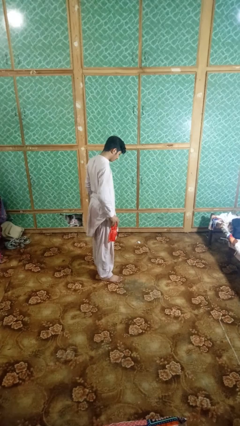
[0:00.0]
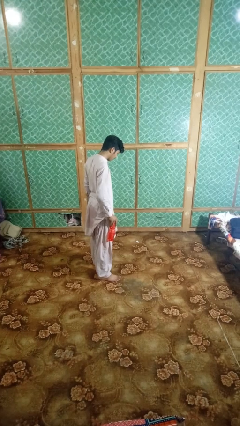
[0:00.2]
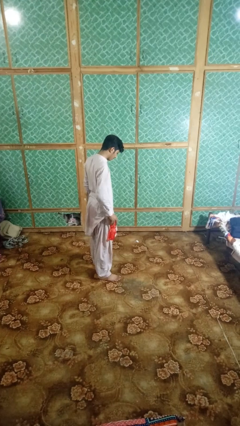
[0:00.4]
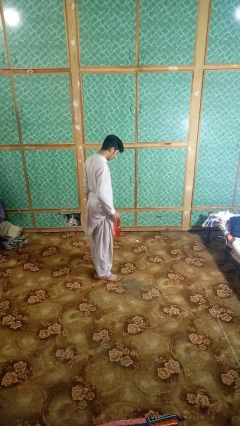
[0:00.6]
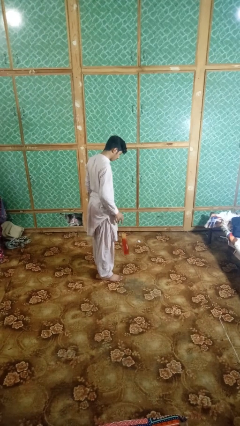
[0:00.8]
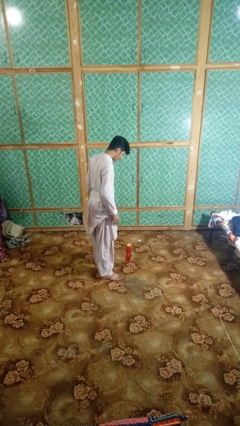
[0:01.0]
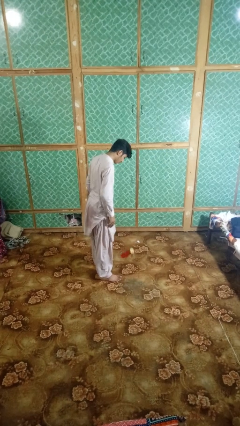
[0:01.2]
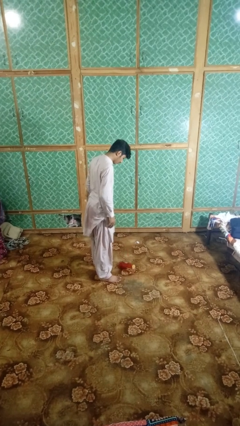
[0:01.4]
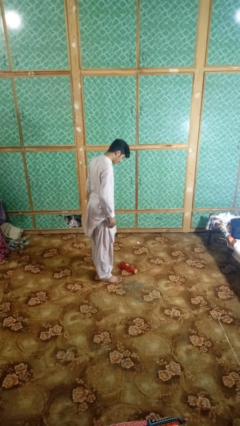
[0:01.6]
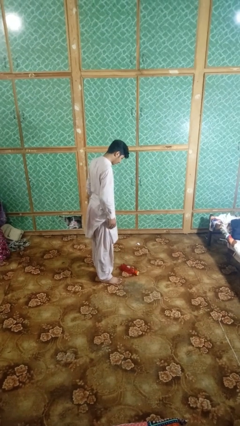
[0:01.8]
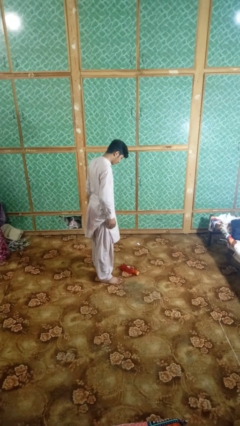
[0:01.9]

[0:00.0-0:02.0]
person drops object

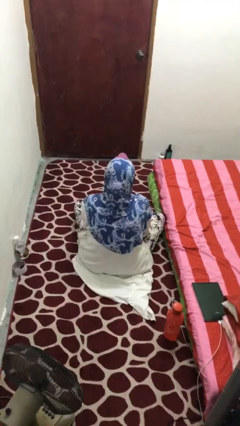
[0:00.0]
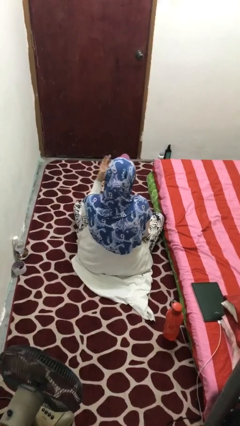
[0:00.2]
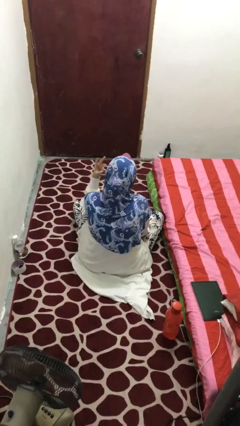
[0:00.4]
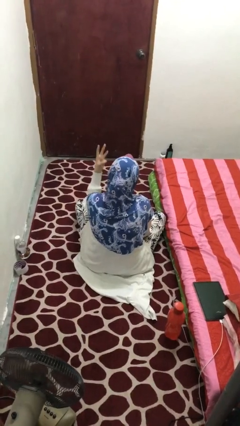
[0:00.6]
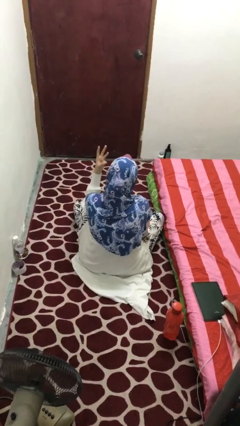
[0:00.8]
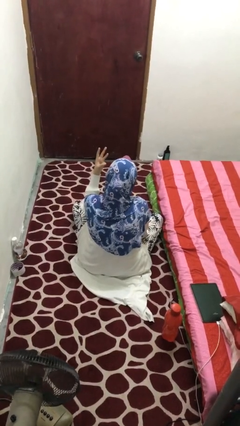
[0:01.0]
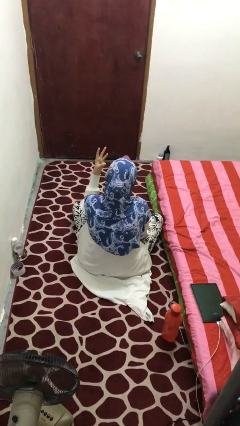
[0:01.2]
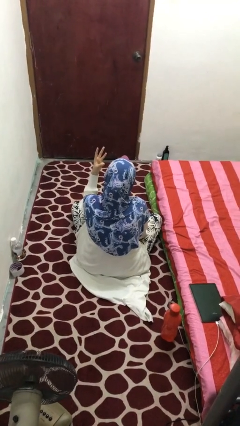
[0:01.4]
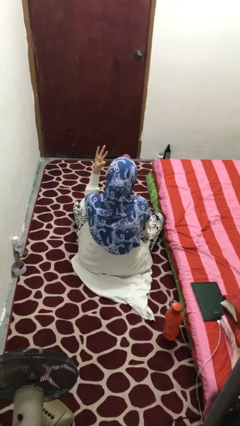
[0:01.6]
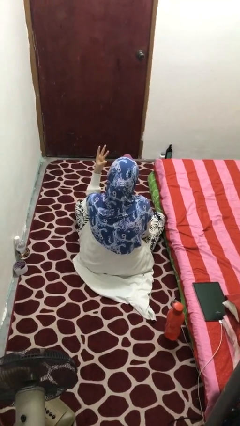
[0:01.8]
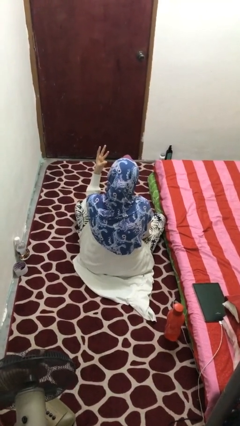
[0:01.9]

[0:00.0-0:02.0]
person gestures number three

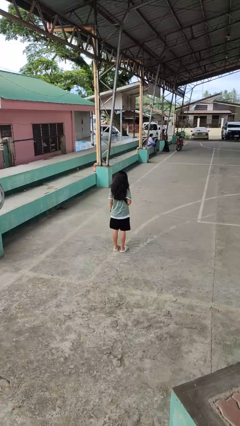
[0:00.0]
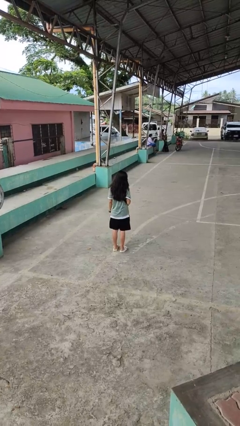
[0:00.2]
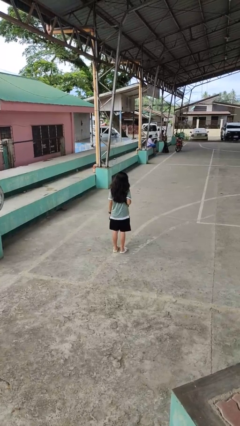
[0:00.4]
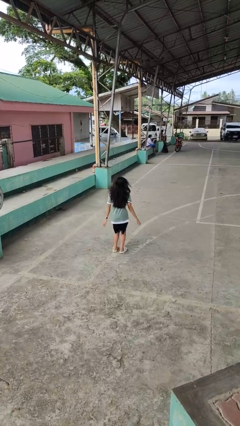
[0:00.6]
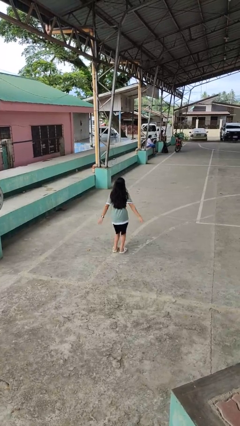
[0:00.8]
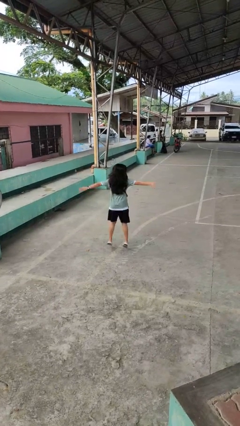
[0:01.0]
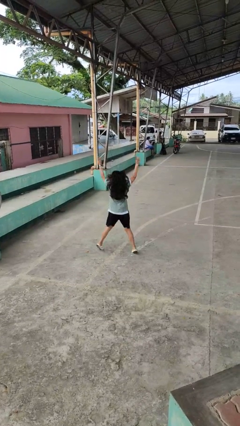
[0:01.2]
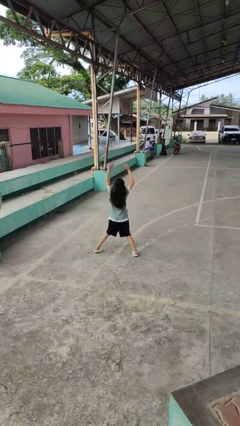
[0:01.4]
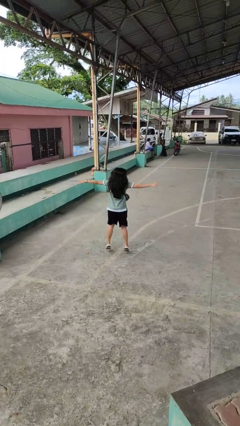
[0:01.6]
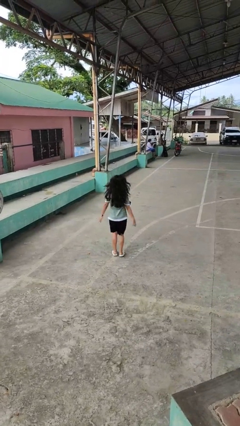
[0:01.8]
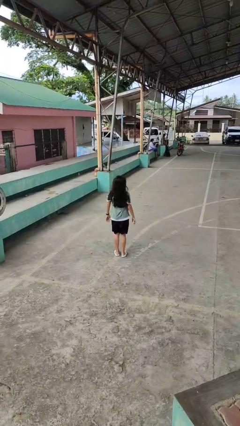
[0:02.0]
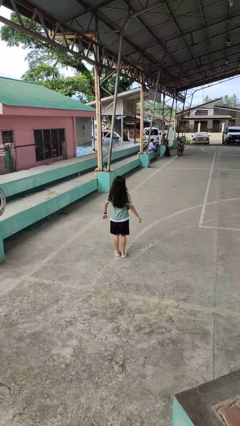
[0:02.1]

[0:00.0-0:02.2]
person exercises with jumping jacks

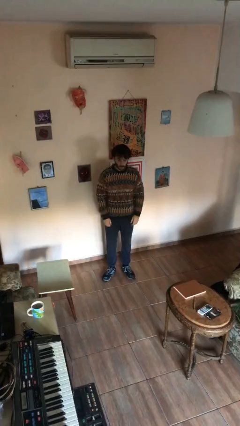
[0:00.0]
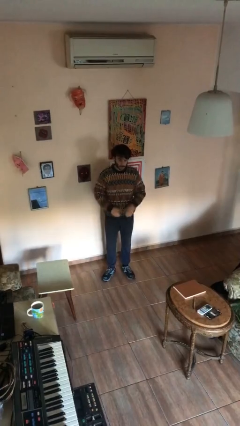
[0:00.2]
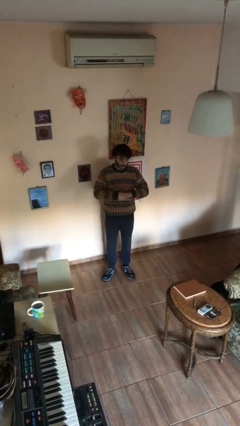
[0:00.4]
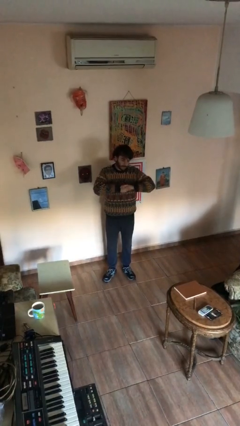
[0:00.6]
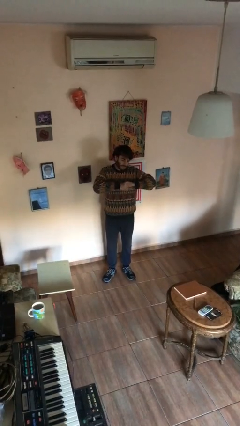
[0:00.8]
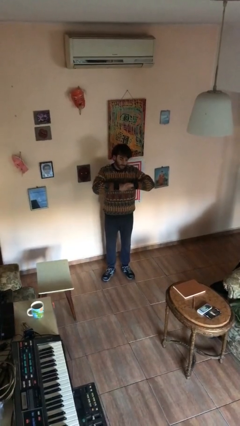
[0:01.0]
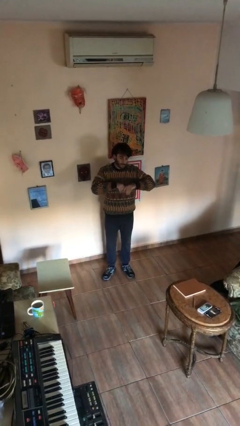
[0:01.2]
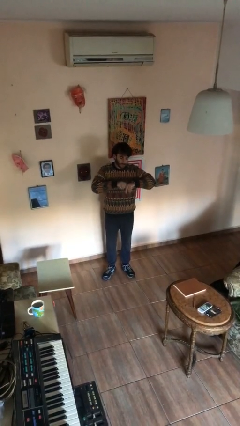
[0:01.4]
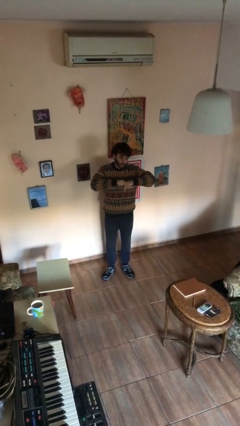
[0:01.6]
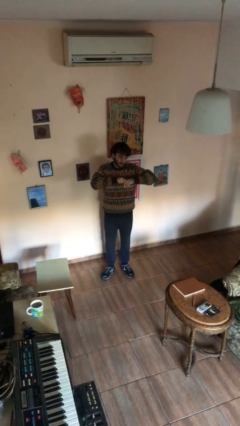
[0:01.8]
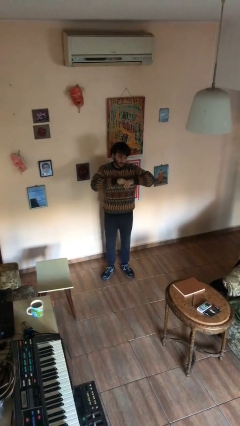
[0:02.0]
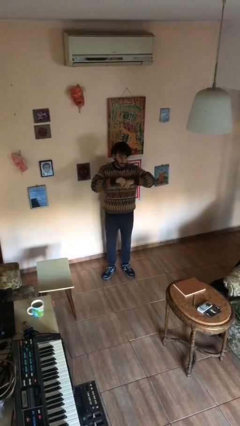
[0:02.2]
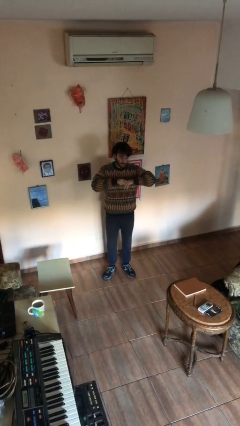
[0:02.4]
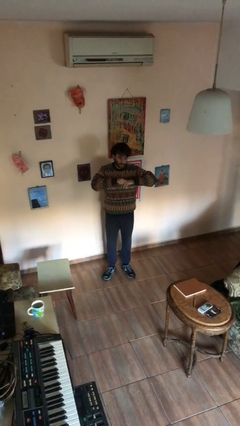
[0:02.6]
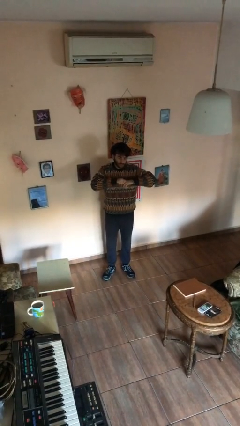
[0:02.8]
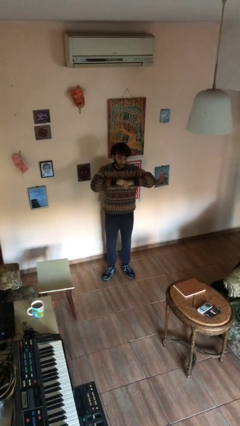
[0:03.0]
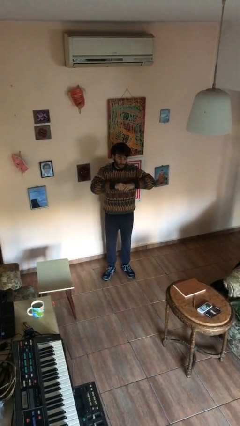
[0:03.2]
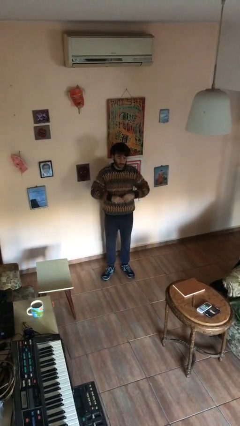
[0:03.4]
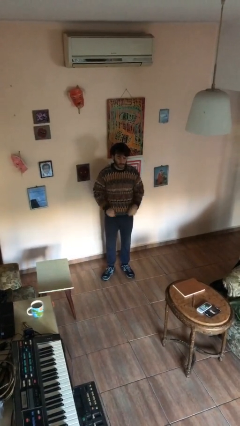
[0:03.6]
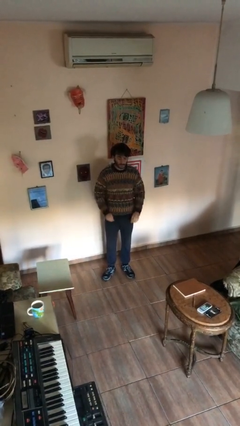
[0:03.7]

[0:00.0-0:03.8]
person cracks knuckles

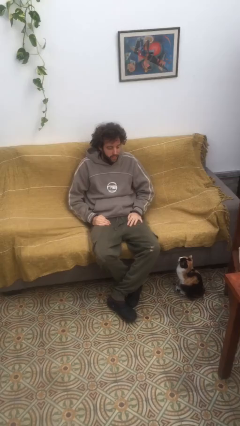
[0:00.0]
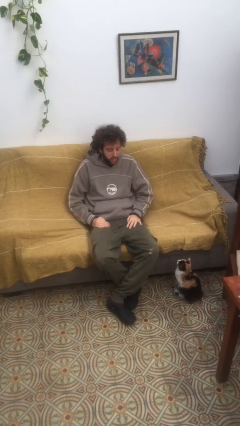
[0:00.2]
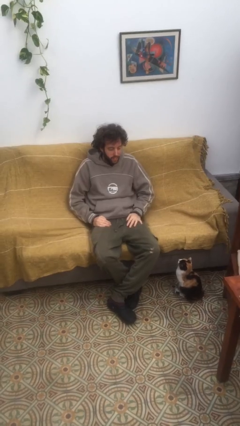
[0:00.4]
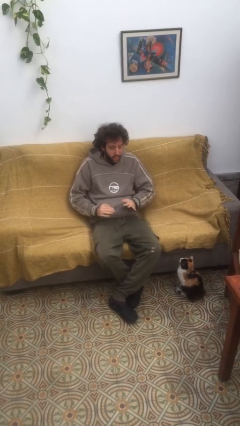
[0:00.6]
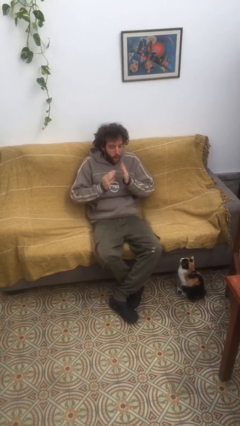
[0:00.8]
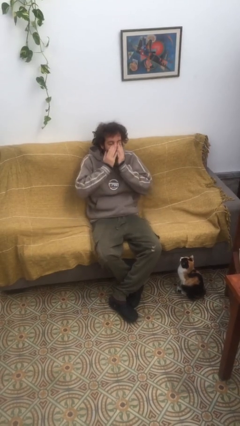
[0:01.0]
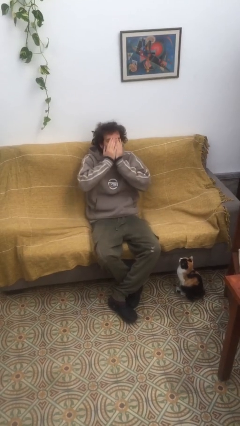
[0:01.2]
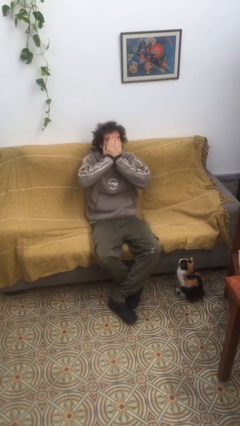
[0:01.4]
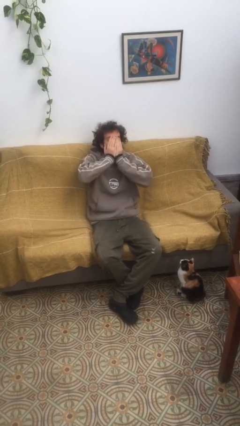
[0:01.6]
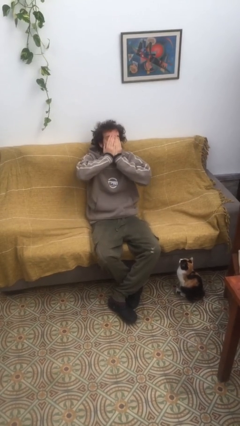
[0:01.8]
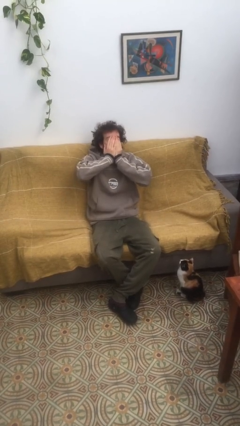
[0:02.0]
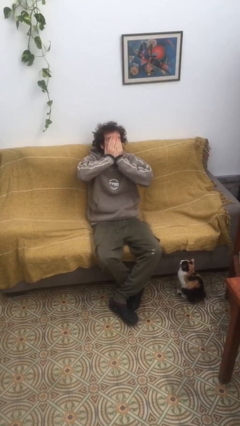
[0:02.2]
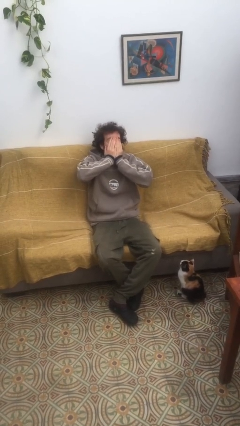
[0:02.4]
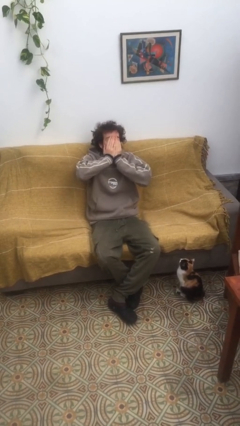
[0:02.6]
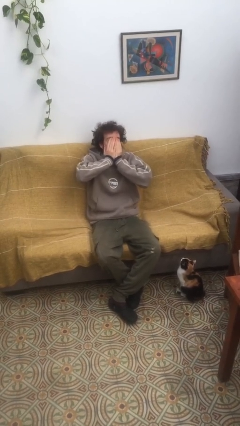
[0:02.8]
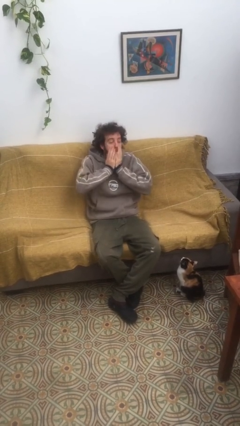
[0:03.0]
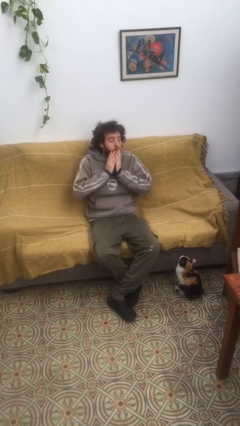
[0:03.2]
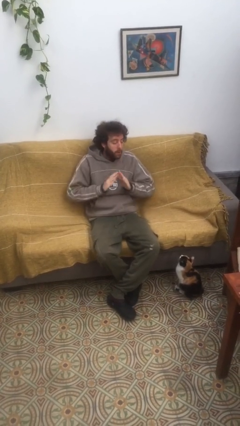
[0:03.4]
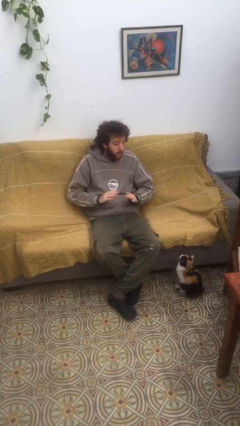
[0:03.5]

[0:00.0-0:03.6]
person yawns

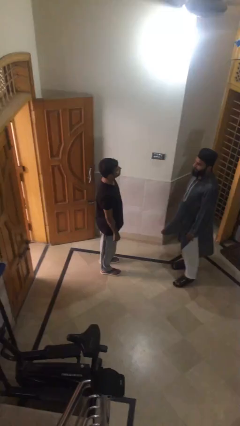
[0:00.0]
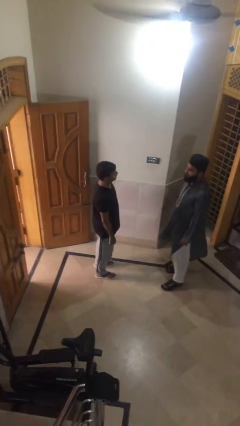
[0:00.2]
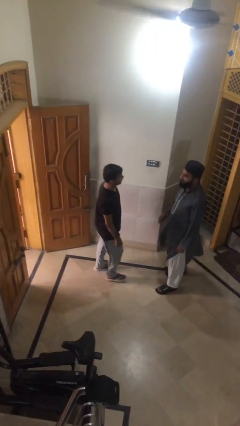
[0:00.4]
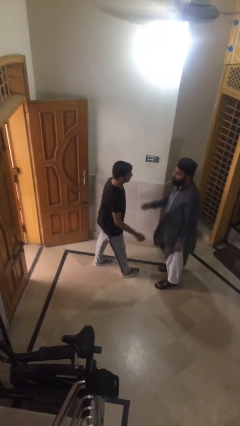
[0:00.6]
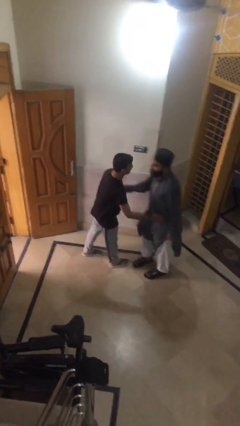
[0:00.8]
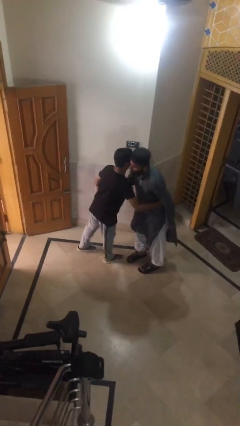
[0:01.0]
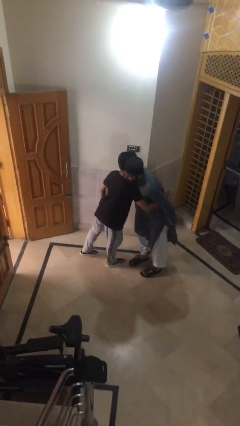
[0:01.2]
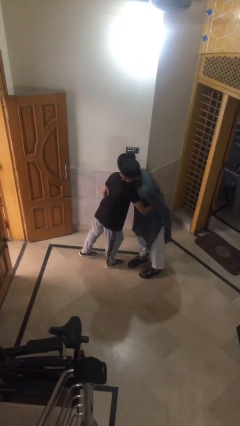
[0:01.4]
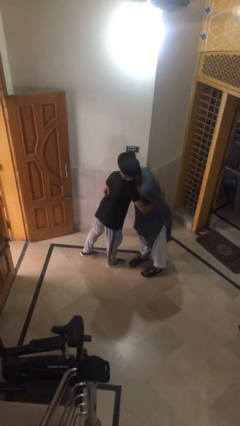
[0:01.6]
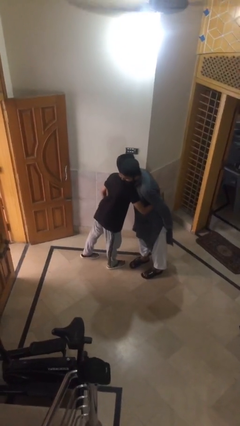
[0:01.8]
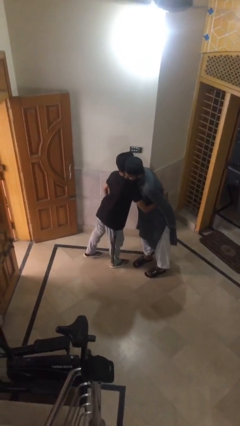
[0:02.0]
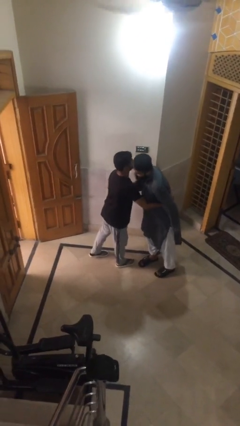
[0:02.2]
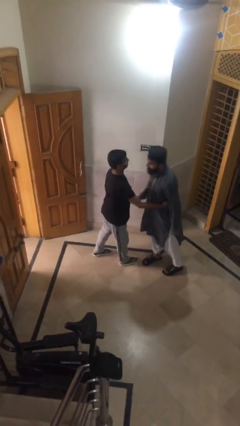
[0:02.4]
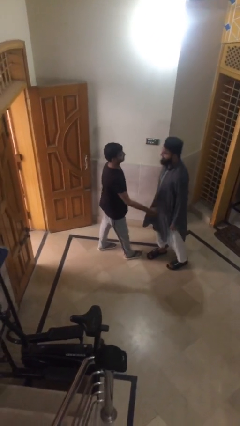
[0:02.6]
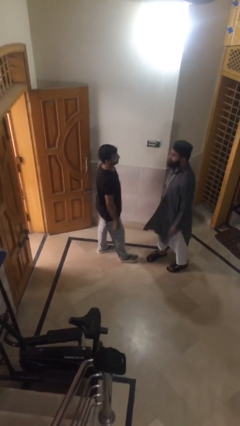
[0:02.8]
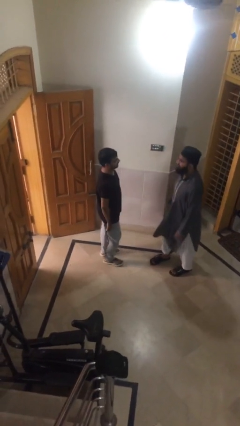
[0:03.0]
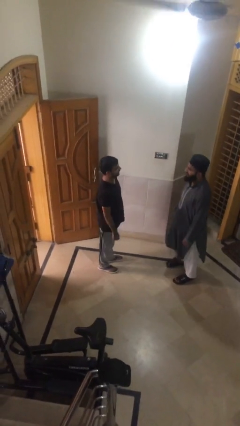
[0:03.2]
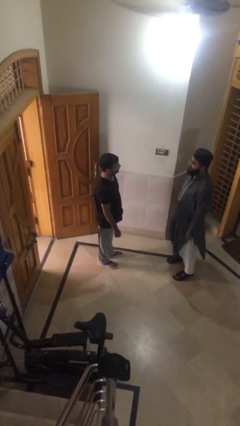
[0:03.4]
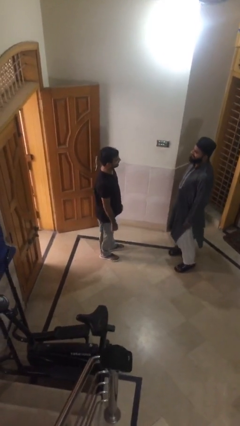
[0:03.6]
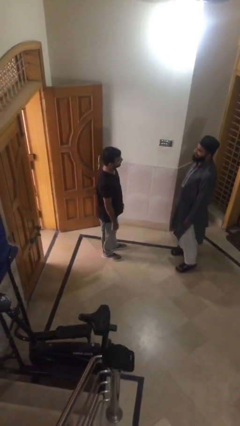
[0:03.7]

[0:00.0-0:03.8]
person embraces person

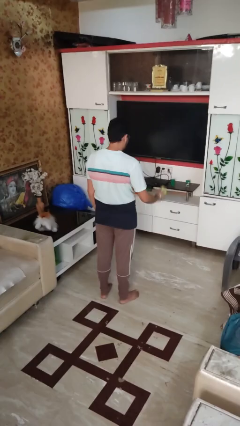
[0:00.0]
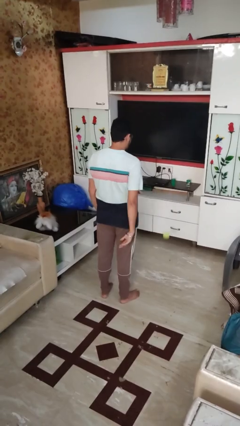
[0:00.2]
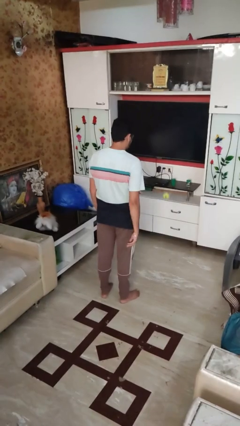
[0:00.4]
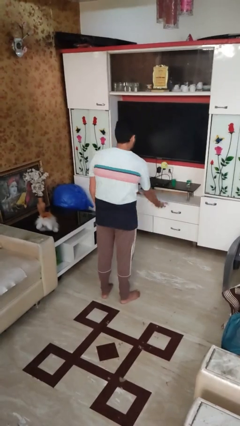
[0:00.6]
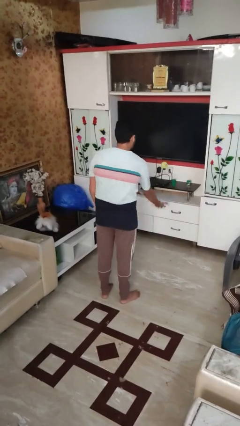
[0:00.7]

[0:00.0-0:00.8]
person bounces ball on floor
